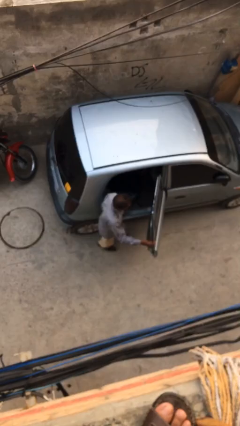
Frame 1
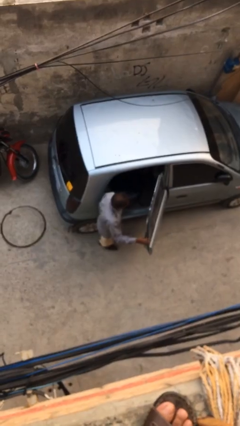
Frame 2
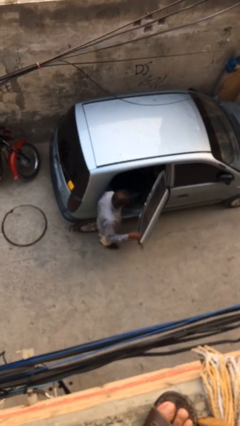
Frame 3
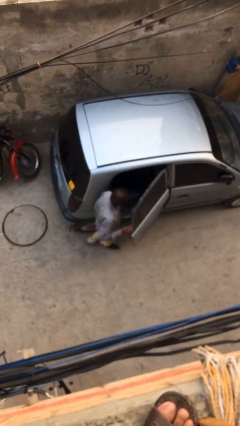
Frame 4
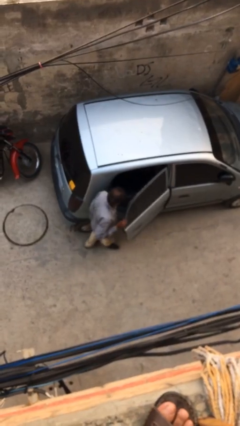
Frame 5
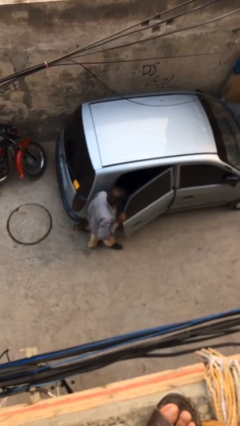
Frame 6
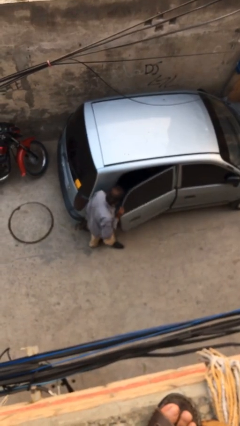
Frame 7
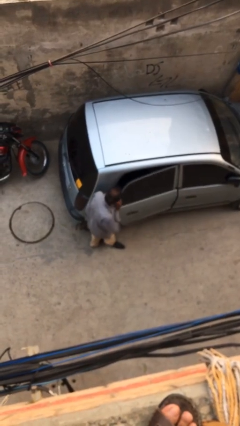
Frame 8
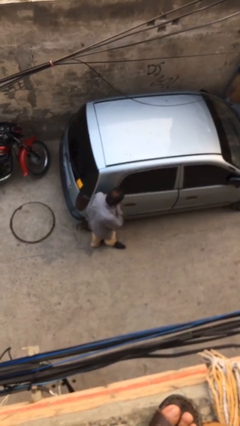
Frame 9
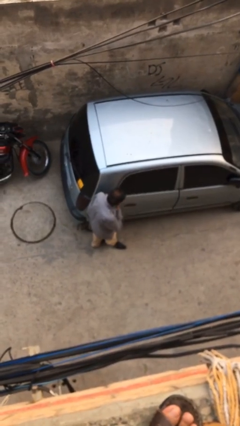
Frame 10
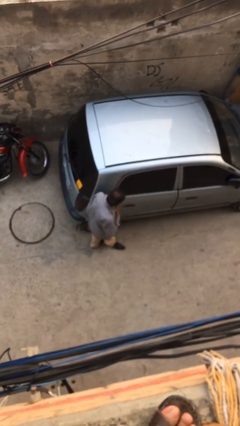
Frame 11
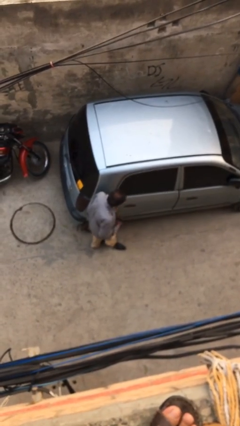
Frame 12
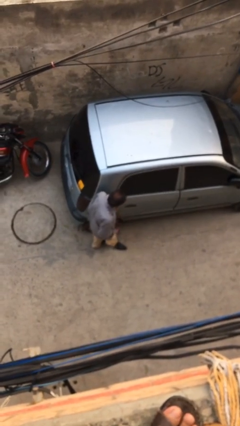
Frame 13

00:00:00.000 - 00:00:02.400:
person closes car door

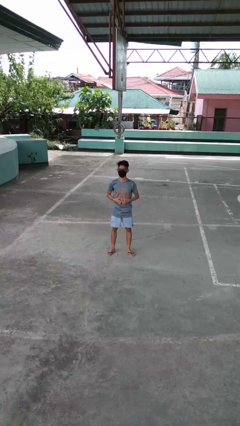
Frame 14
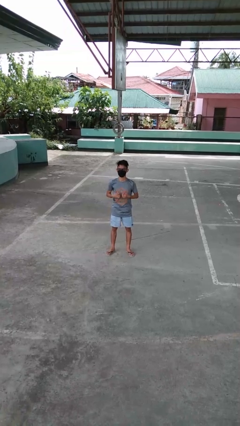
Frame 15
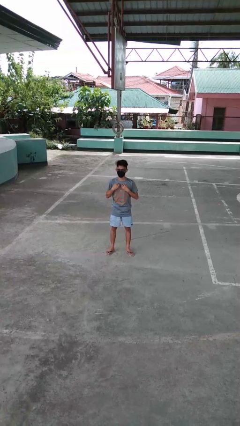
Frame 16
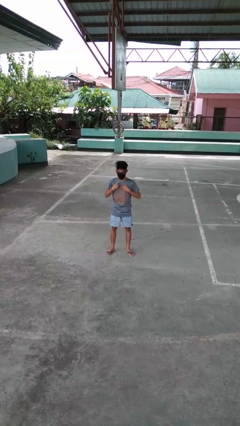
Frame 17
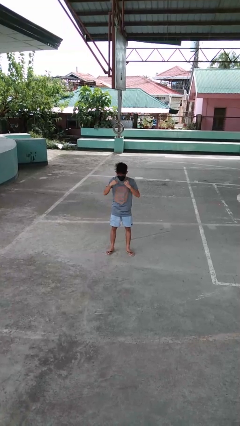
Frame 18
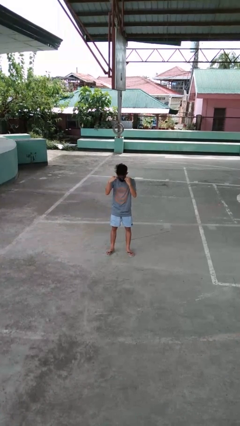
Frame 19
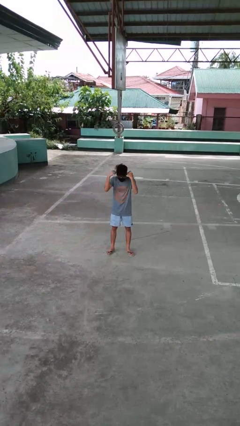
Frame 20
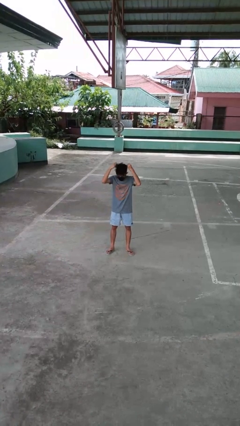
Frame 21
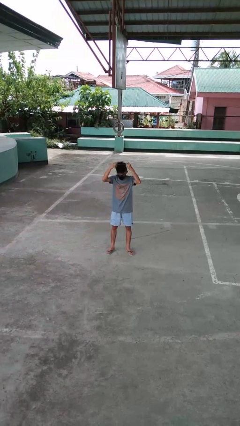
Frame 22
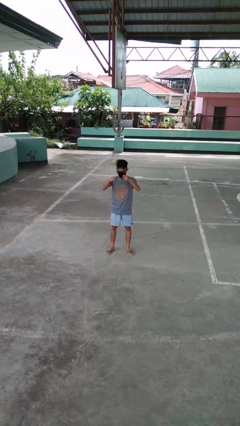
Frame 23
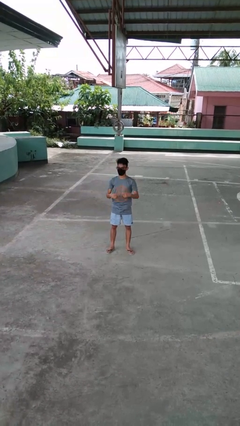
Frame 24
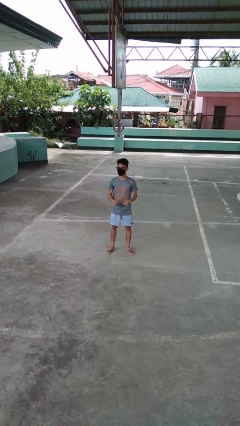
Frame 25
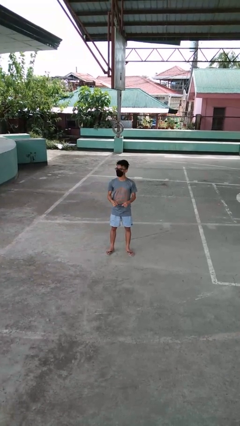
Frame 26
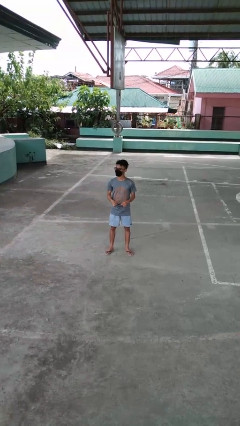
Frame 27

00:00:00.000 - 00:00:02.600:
person takes off necklace

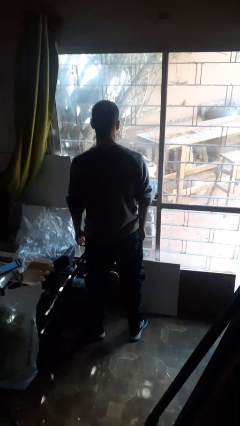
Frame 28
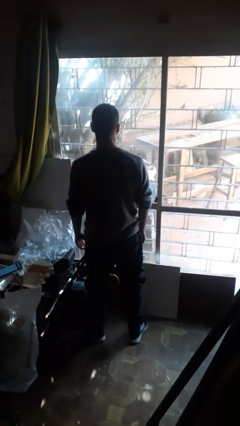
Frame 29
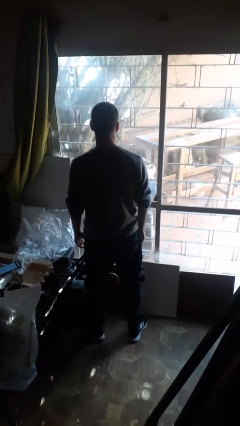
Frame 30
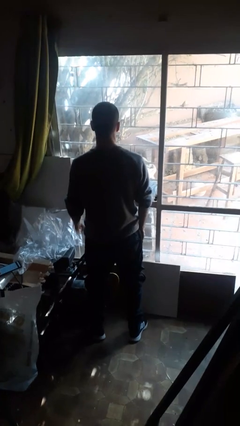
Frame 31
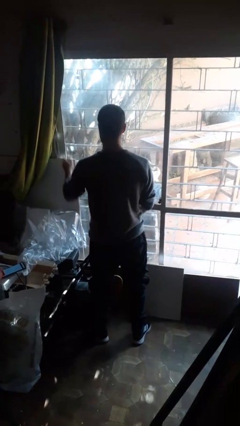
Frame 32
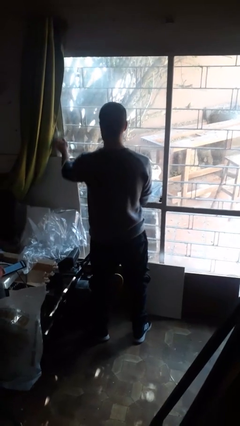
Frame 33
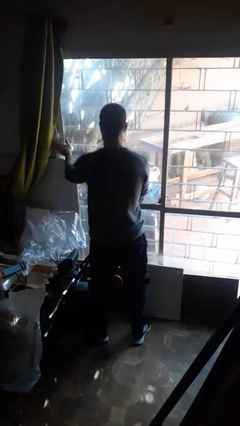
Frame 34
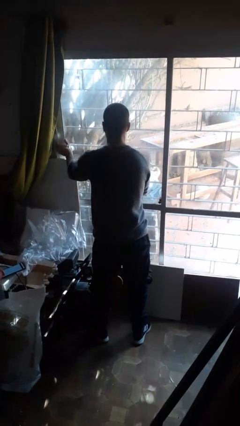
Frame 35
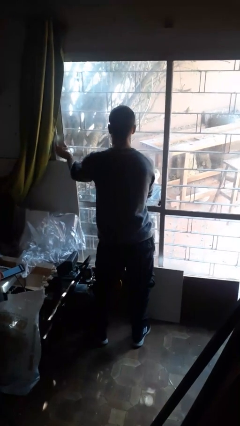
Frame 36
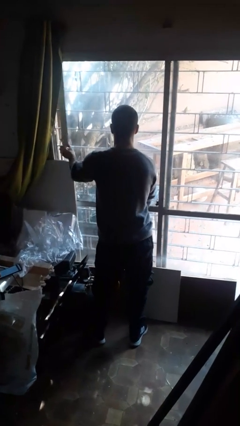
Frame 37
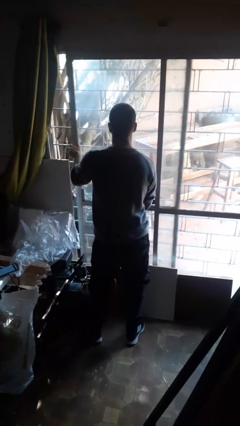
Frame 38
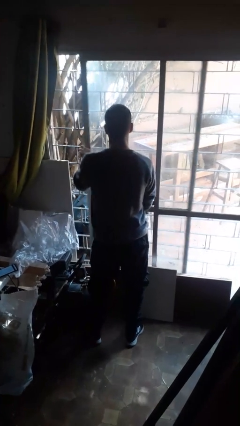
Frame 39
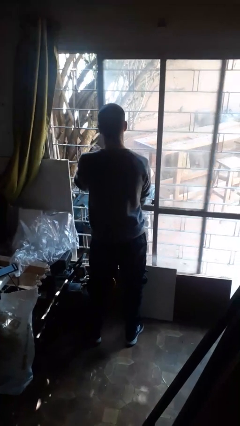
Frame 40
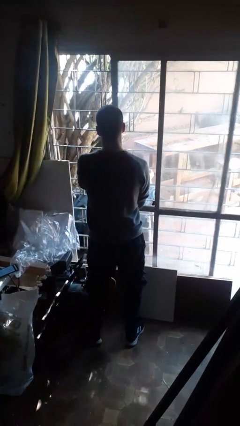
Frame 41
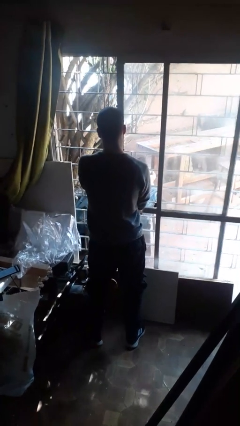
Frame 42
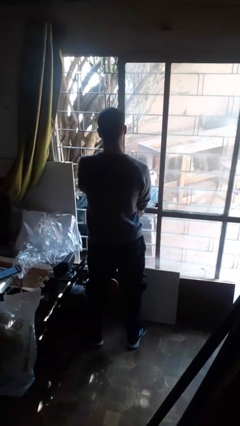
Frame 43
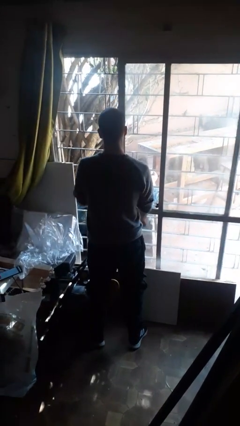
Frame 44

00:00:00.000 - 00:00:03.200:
person opens sliding door

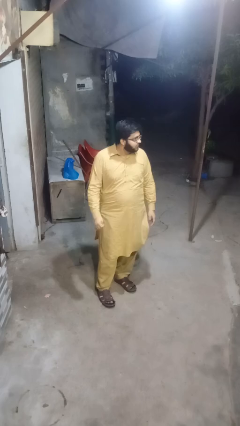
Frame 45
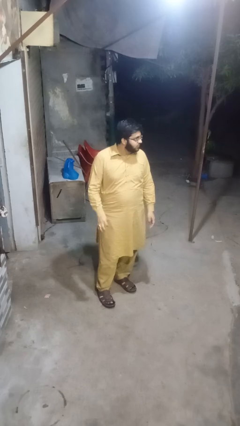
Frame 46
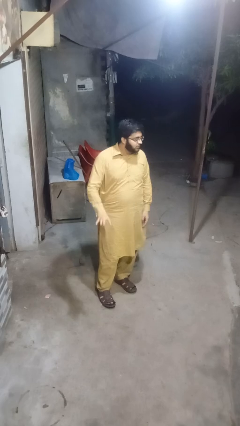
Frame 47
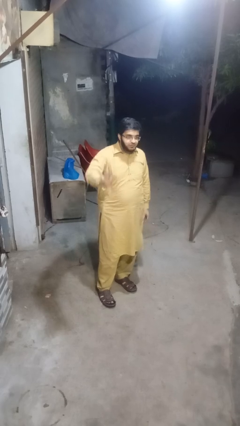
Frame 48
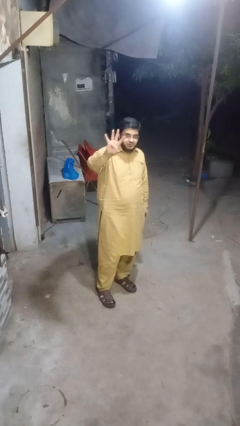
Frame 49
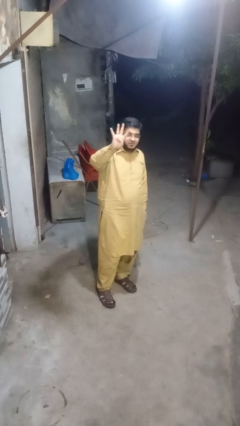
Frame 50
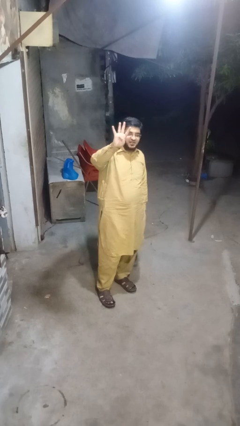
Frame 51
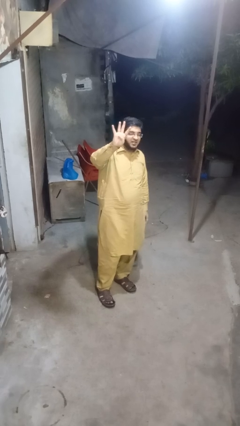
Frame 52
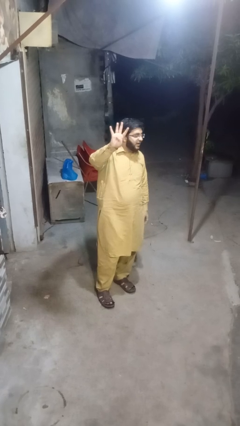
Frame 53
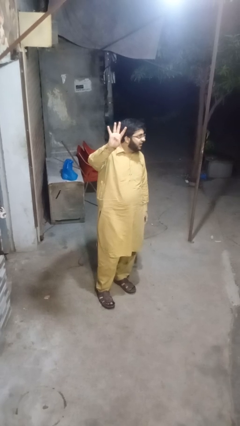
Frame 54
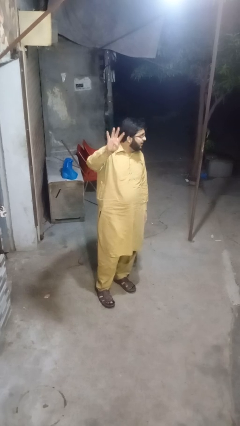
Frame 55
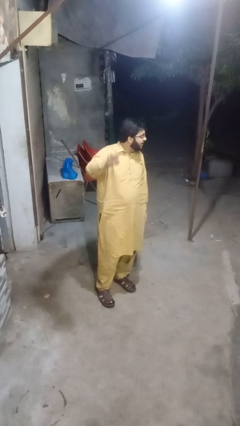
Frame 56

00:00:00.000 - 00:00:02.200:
person gestures number four

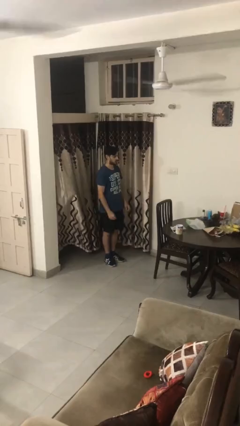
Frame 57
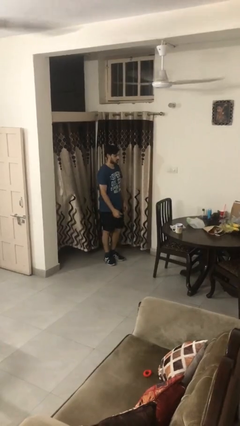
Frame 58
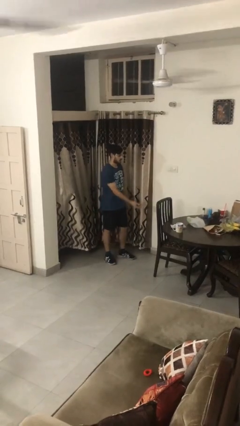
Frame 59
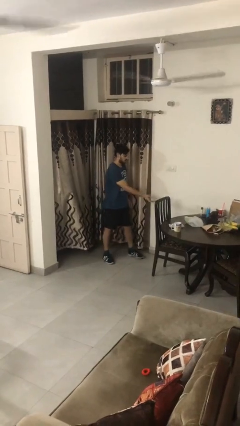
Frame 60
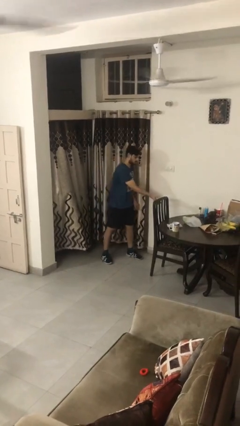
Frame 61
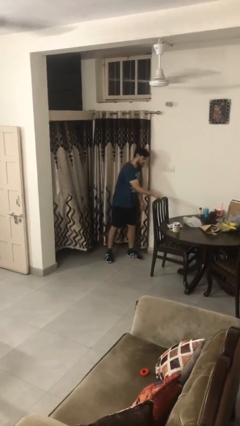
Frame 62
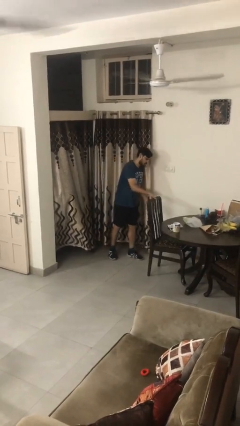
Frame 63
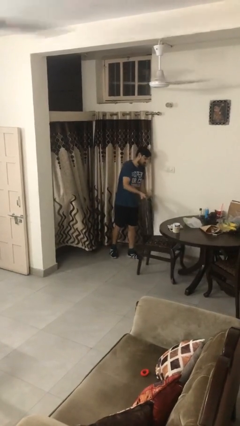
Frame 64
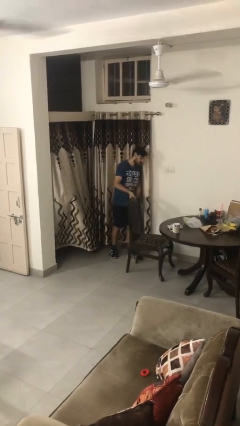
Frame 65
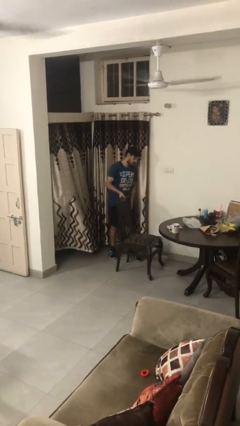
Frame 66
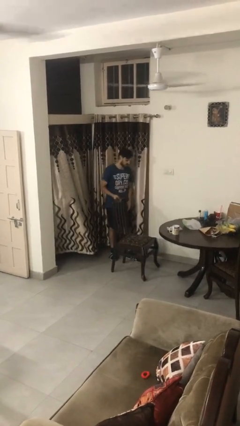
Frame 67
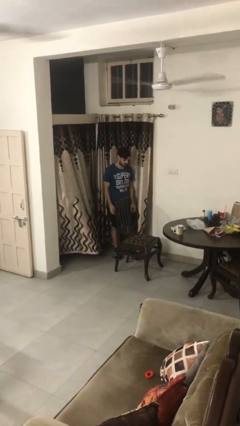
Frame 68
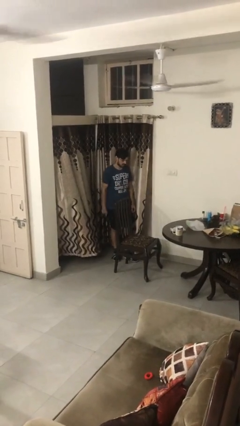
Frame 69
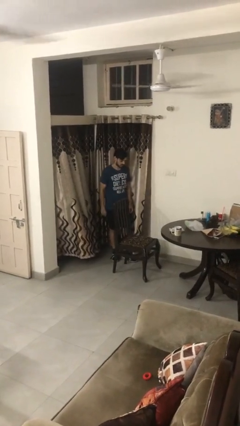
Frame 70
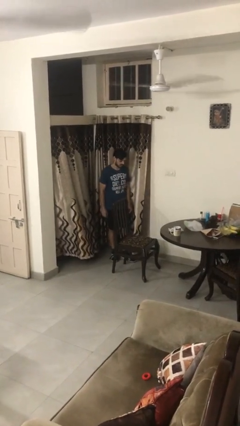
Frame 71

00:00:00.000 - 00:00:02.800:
person pulls out chair

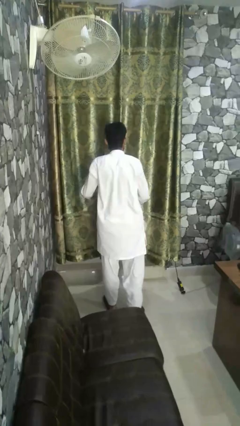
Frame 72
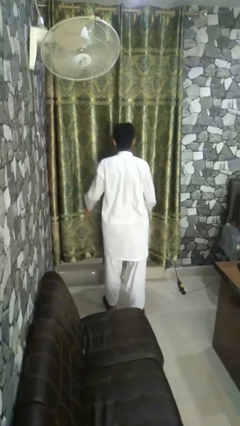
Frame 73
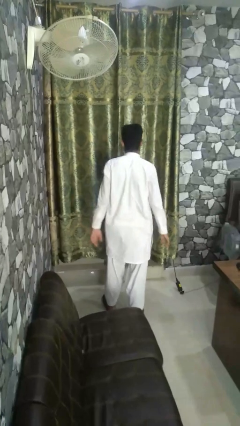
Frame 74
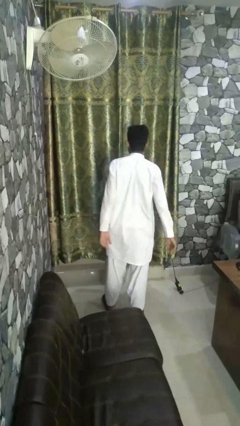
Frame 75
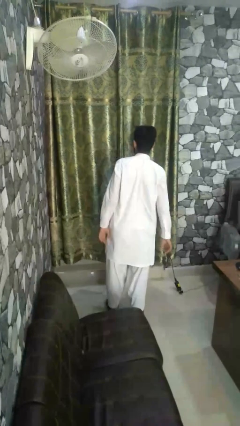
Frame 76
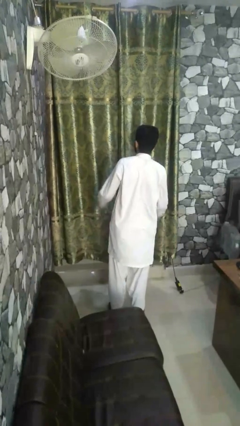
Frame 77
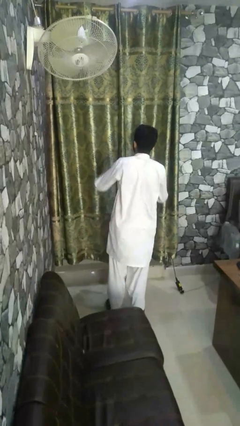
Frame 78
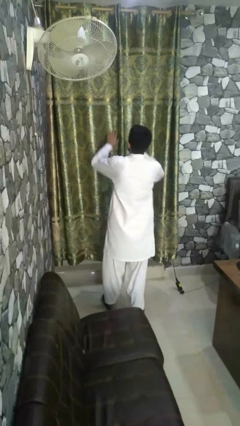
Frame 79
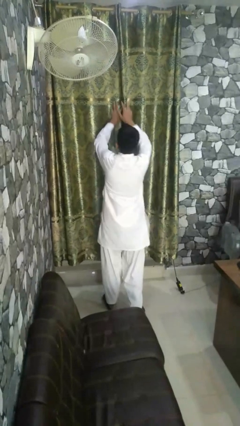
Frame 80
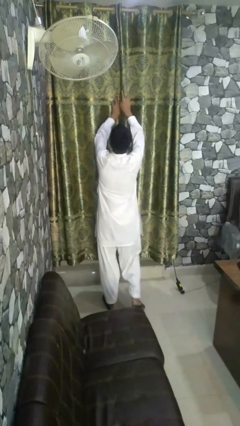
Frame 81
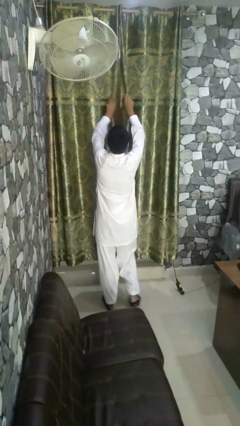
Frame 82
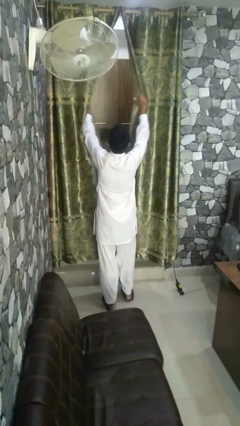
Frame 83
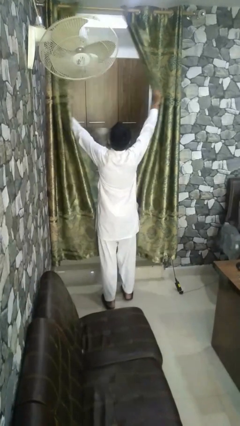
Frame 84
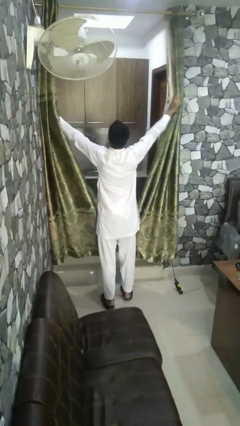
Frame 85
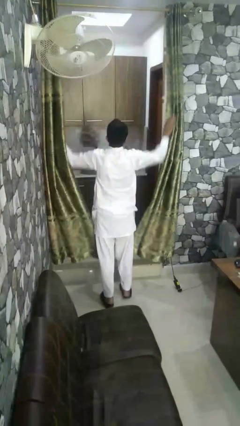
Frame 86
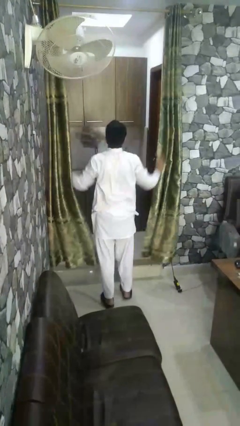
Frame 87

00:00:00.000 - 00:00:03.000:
person opens curtains

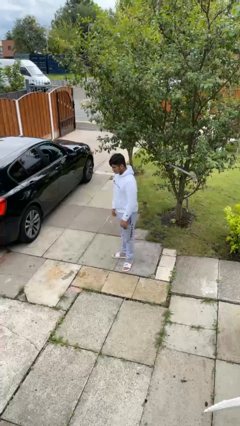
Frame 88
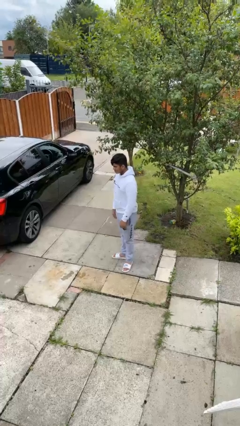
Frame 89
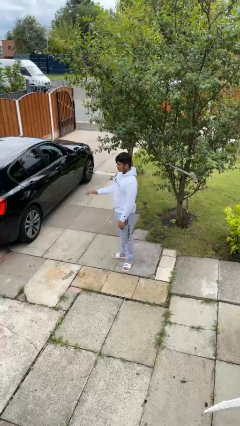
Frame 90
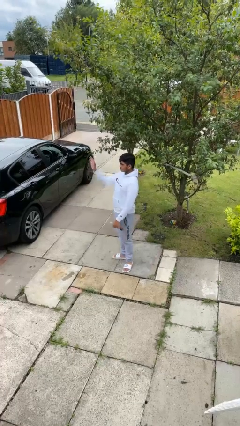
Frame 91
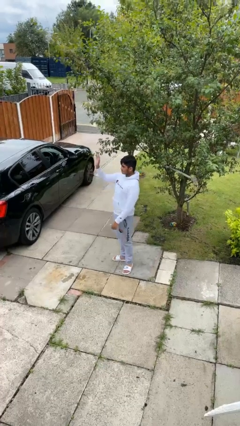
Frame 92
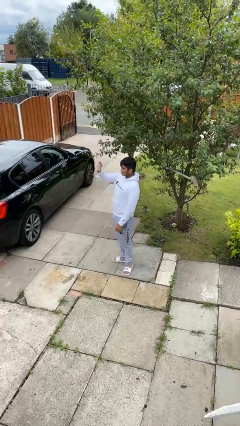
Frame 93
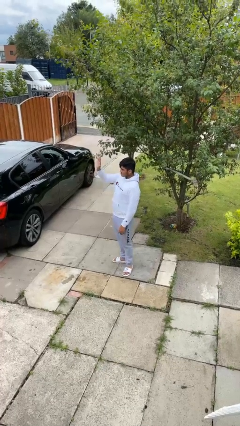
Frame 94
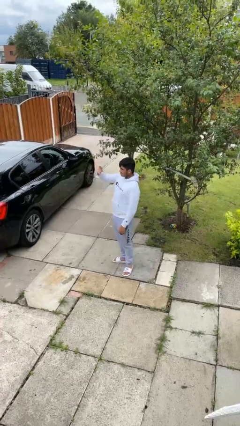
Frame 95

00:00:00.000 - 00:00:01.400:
person waves at person
